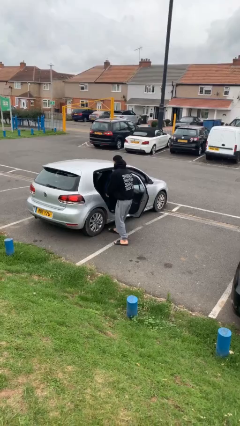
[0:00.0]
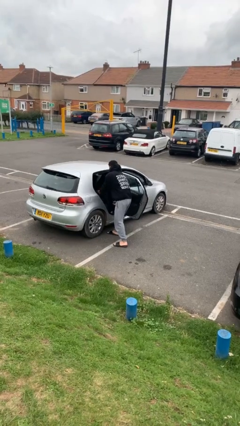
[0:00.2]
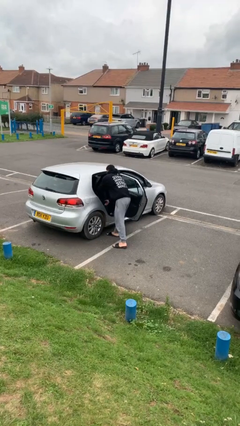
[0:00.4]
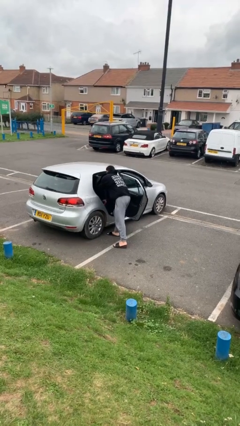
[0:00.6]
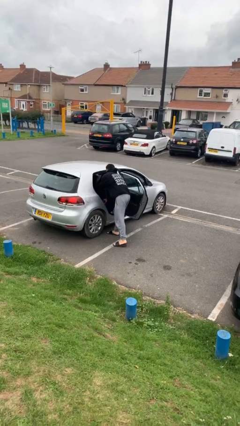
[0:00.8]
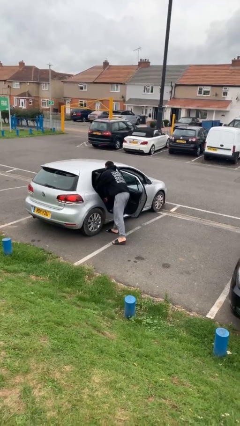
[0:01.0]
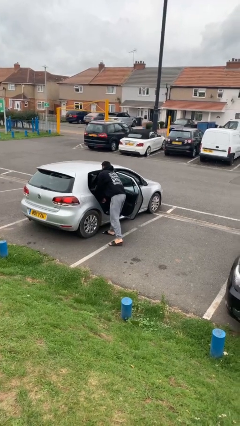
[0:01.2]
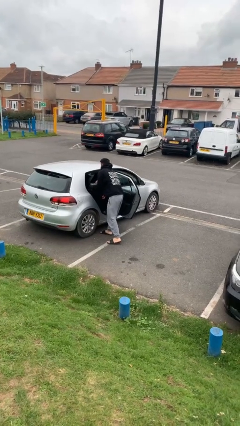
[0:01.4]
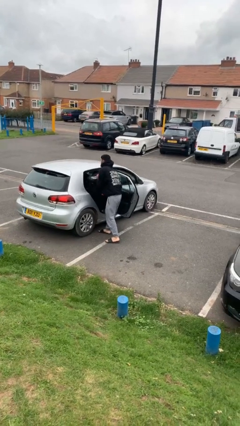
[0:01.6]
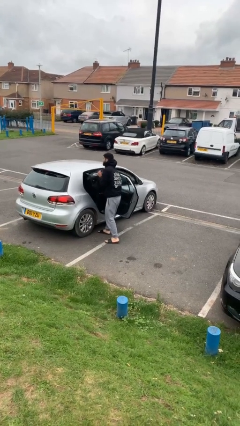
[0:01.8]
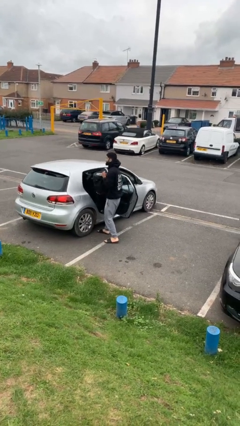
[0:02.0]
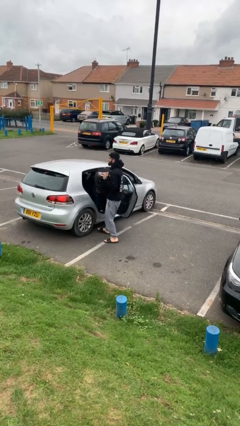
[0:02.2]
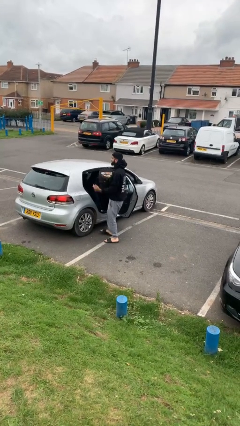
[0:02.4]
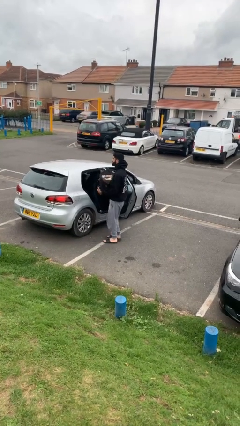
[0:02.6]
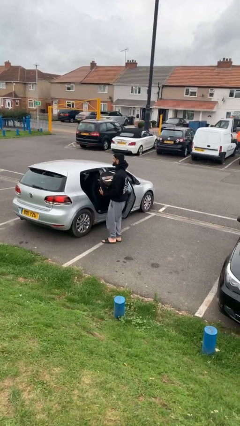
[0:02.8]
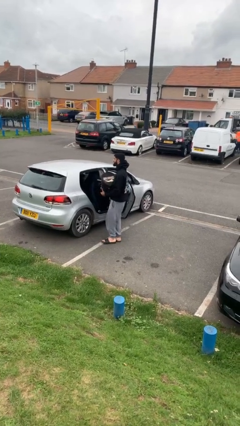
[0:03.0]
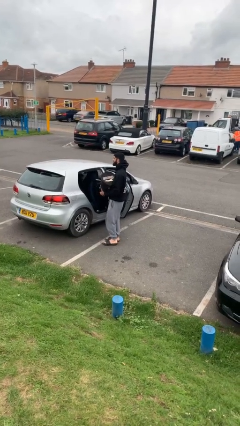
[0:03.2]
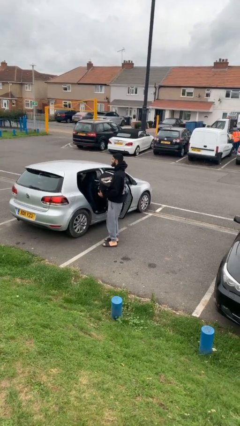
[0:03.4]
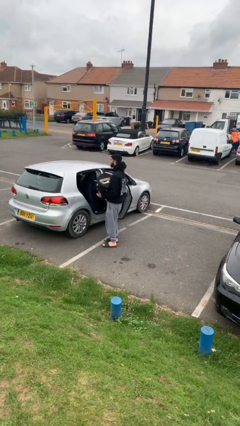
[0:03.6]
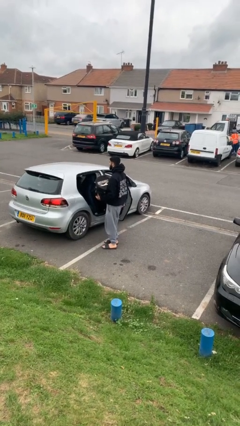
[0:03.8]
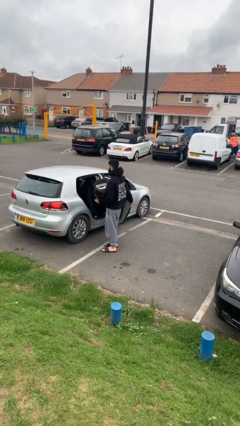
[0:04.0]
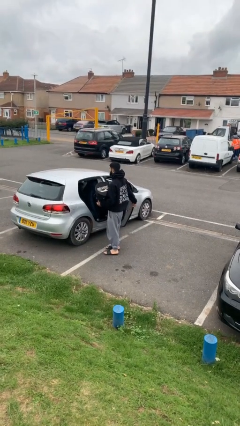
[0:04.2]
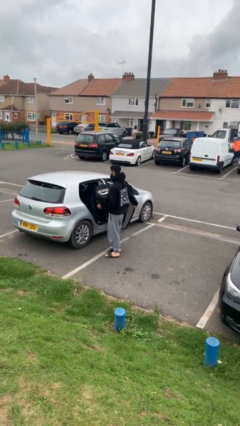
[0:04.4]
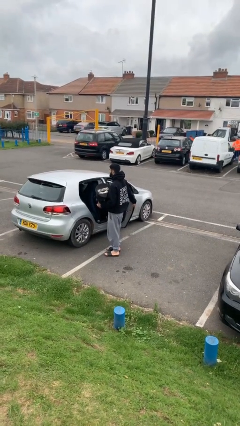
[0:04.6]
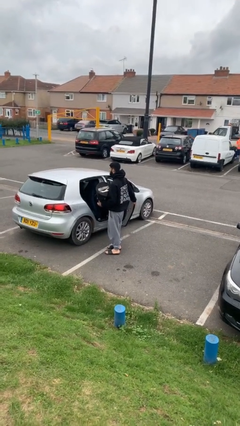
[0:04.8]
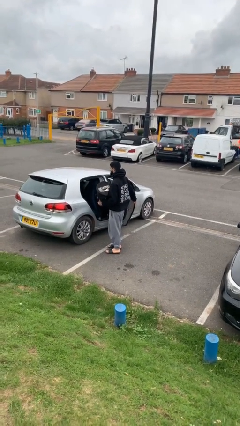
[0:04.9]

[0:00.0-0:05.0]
person unloads car

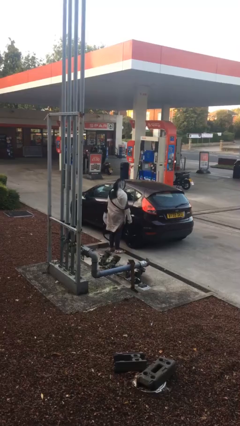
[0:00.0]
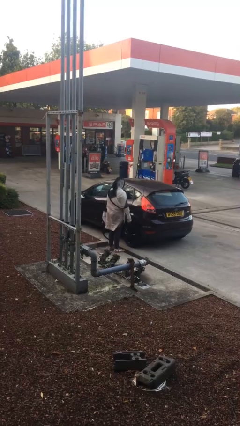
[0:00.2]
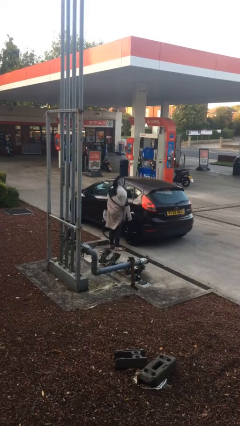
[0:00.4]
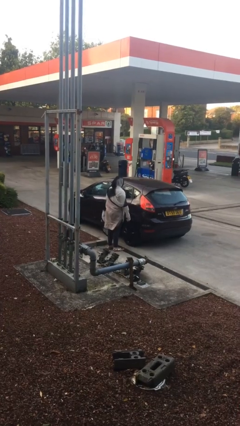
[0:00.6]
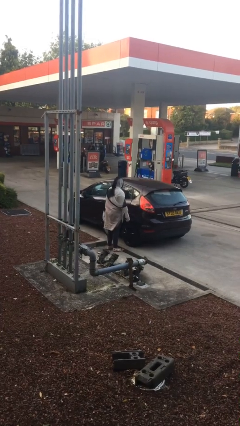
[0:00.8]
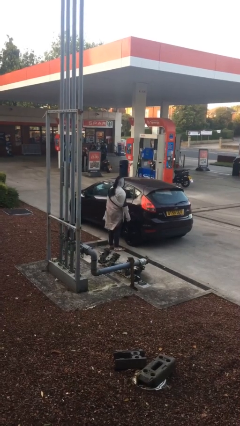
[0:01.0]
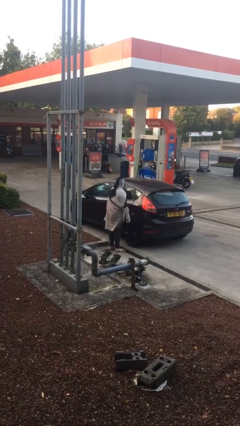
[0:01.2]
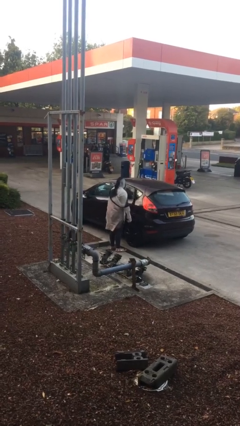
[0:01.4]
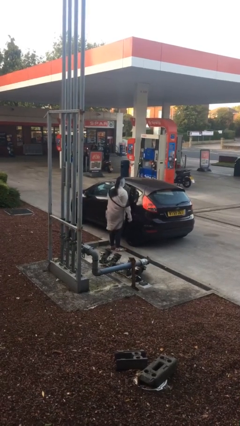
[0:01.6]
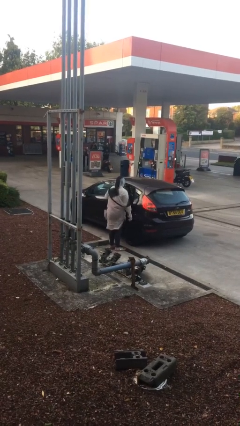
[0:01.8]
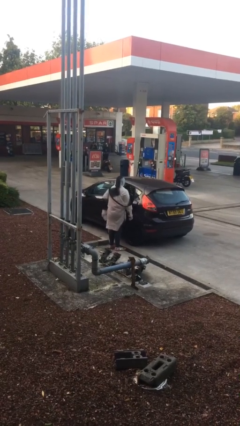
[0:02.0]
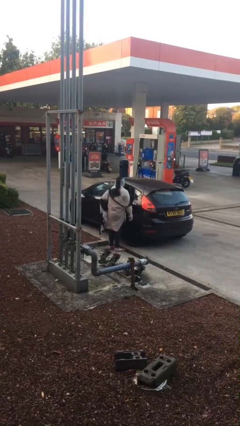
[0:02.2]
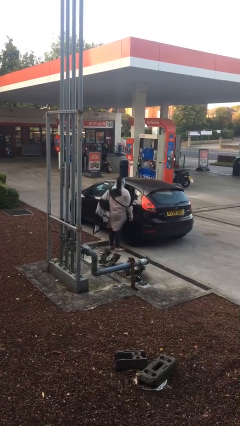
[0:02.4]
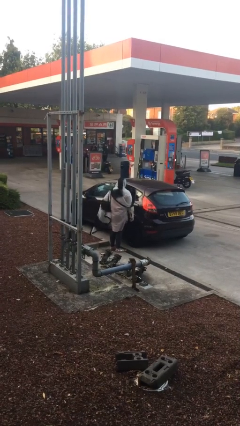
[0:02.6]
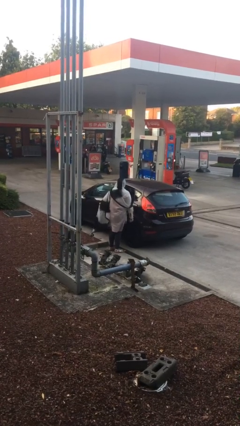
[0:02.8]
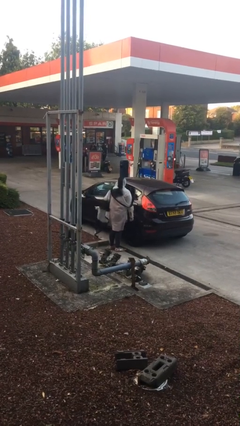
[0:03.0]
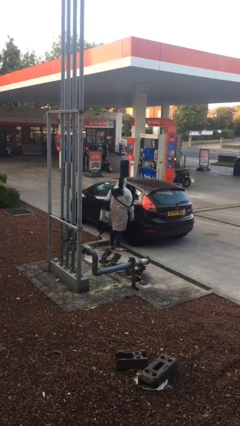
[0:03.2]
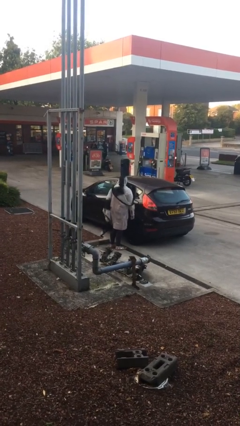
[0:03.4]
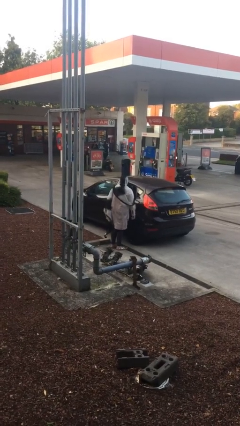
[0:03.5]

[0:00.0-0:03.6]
person opens car door

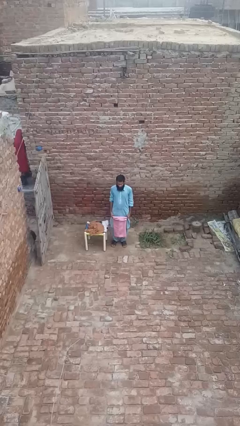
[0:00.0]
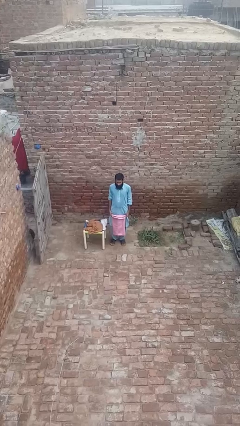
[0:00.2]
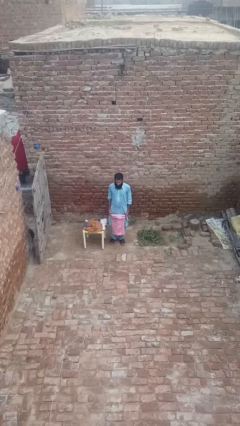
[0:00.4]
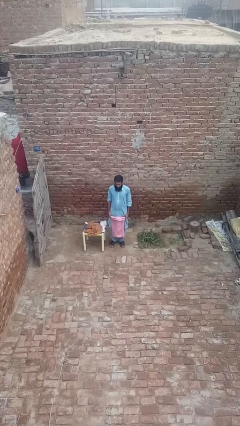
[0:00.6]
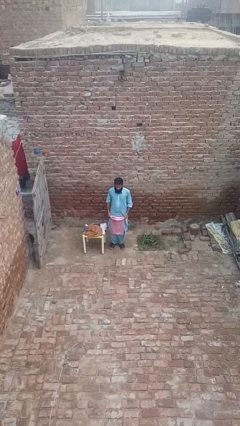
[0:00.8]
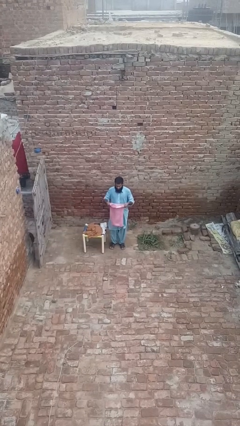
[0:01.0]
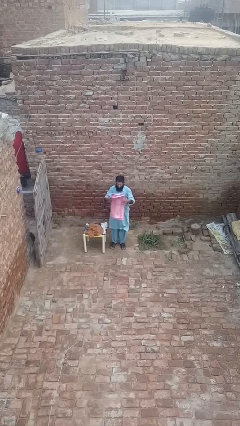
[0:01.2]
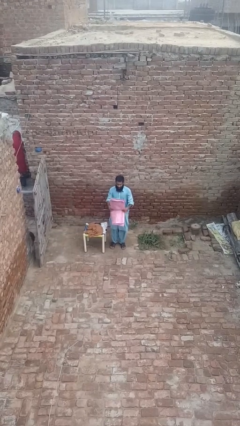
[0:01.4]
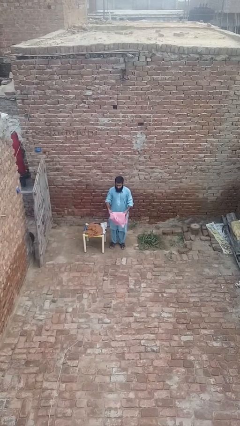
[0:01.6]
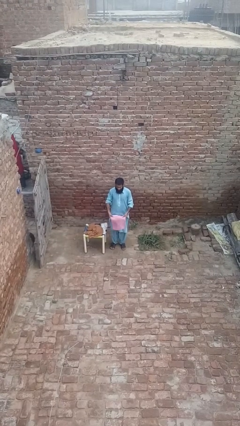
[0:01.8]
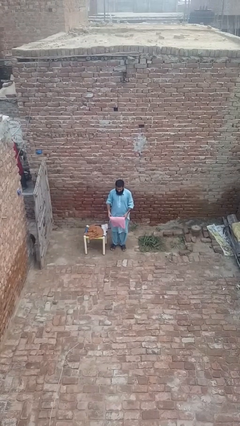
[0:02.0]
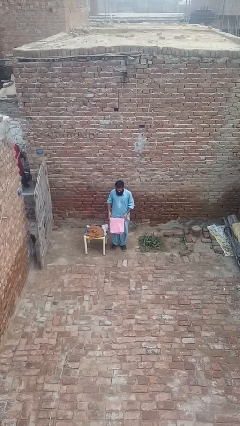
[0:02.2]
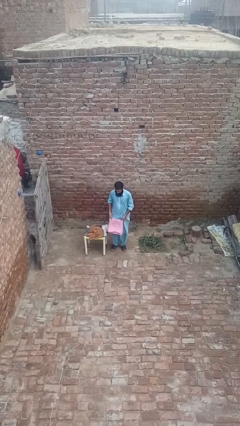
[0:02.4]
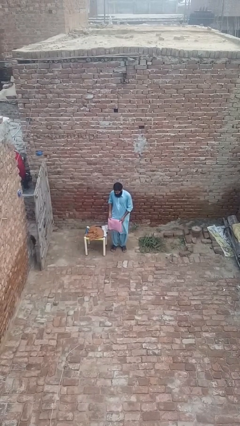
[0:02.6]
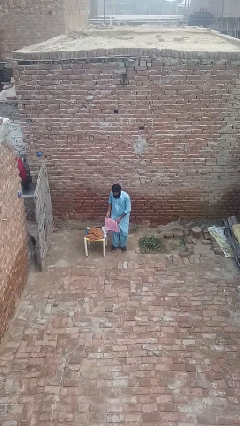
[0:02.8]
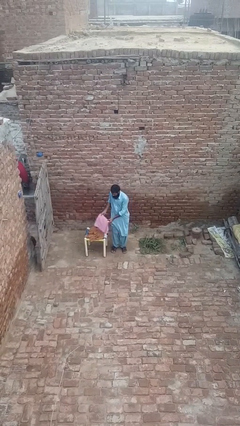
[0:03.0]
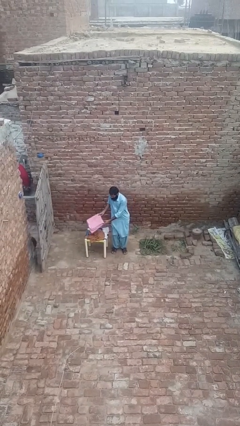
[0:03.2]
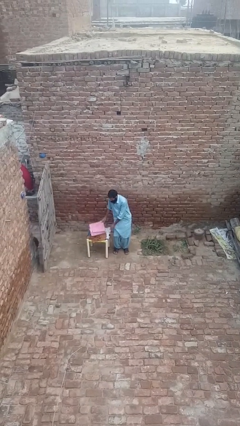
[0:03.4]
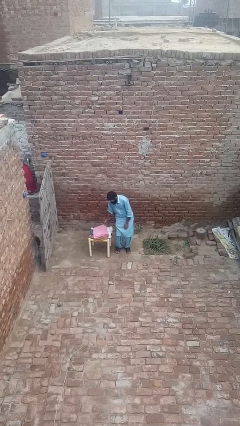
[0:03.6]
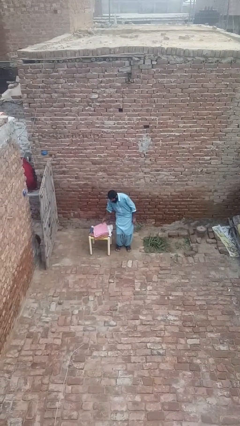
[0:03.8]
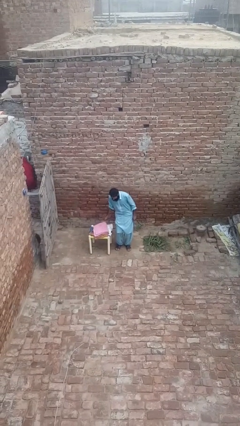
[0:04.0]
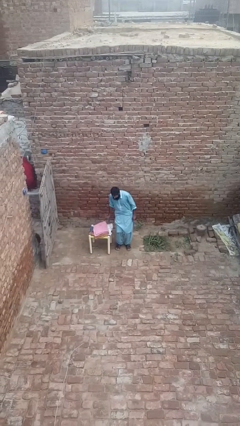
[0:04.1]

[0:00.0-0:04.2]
person folds towel

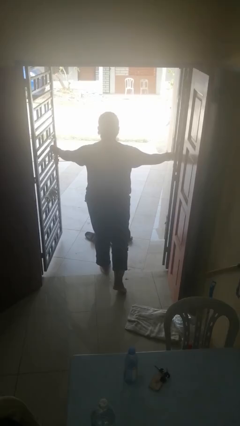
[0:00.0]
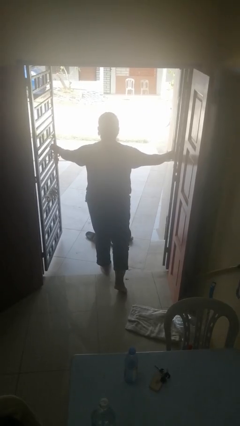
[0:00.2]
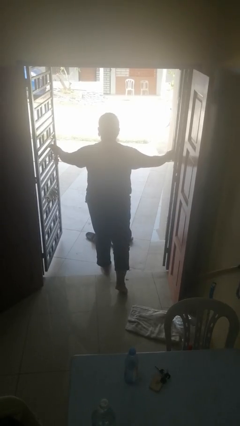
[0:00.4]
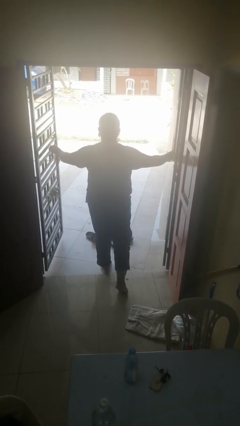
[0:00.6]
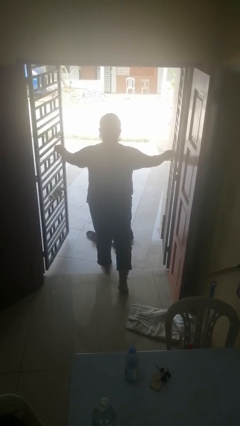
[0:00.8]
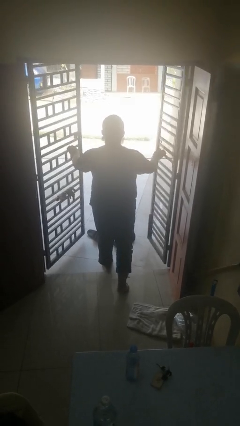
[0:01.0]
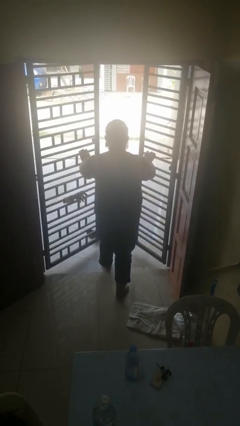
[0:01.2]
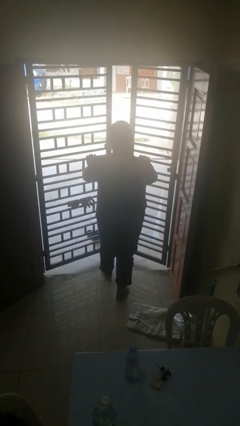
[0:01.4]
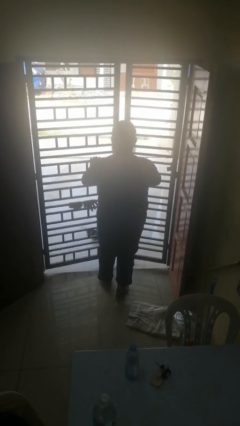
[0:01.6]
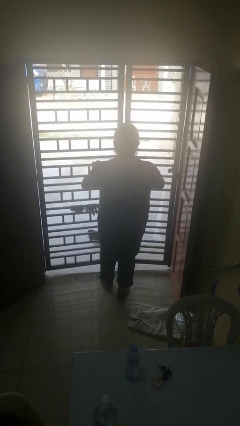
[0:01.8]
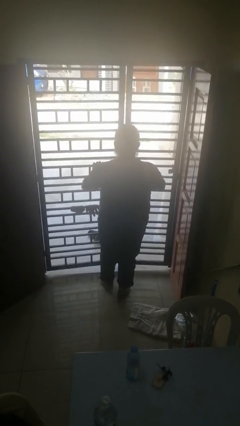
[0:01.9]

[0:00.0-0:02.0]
person closes gate

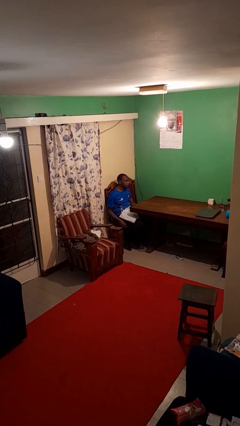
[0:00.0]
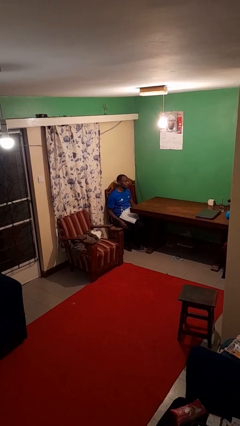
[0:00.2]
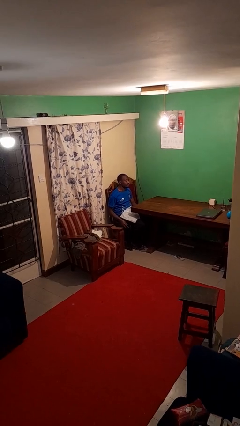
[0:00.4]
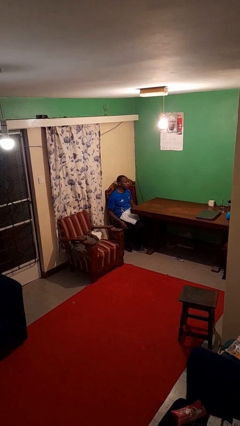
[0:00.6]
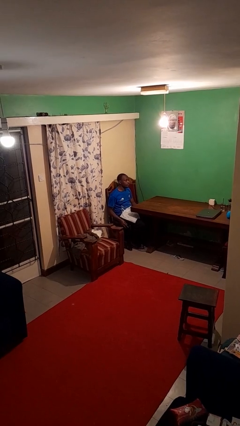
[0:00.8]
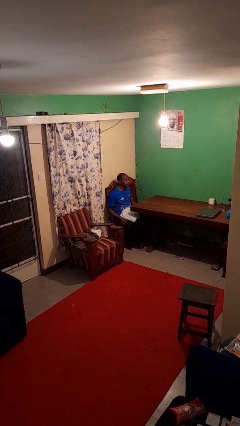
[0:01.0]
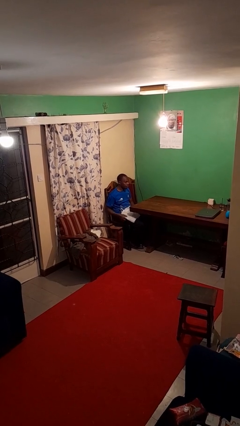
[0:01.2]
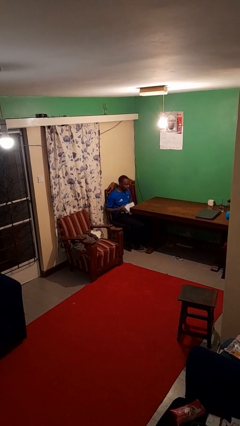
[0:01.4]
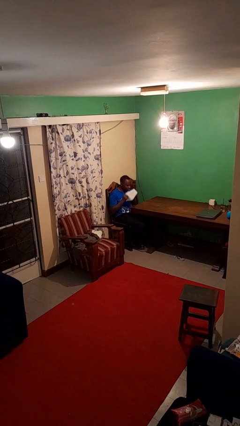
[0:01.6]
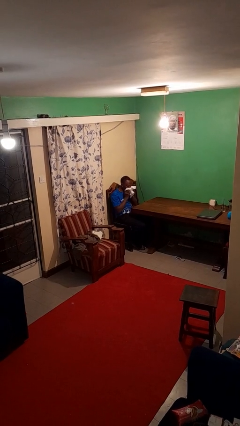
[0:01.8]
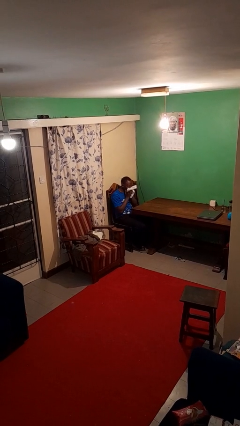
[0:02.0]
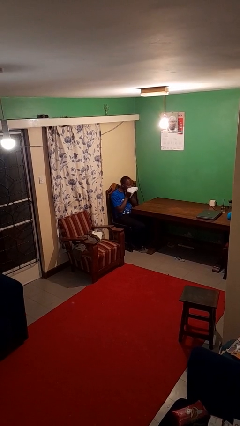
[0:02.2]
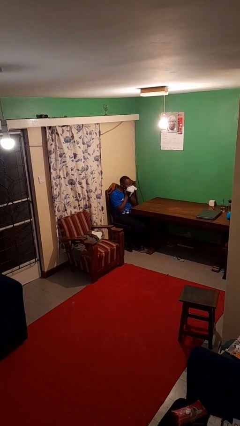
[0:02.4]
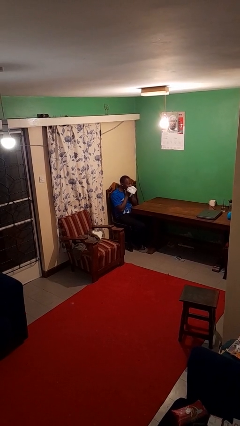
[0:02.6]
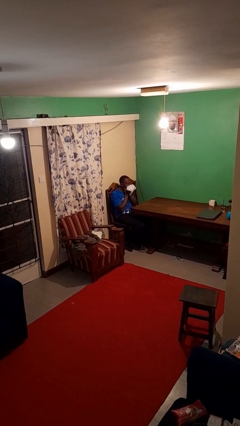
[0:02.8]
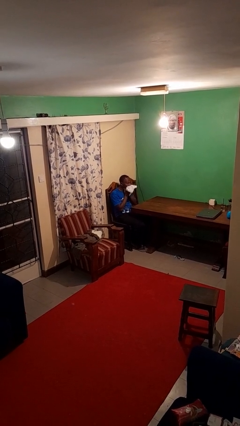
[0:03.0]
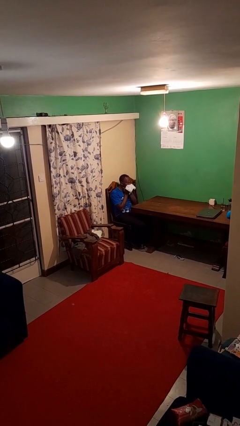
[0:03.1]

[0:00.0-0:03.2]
person wipes mouth with napkin
